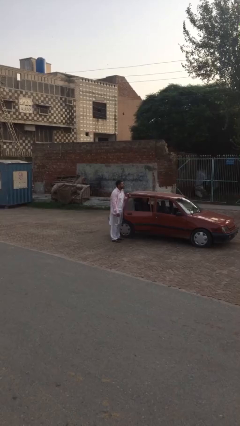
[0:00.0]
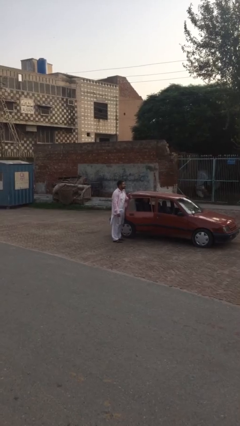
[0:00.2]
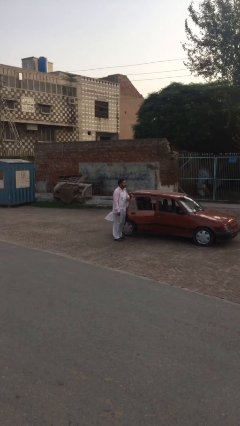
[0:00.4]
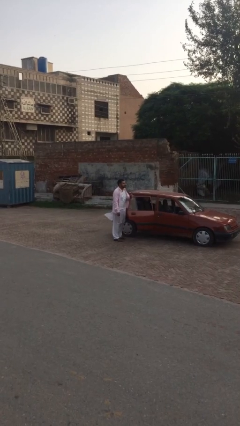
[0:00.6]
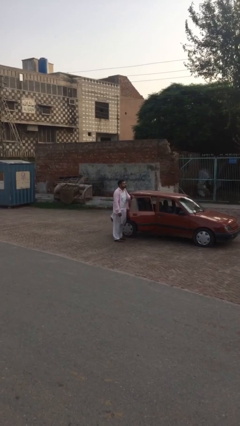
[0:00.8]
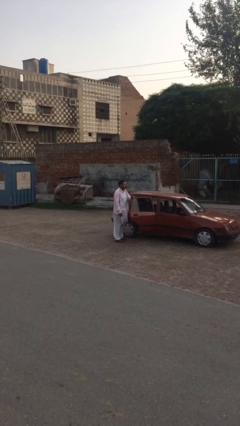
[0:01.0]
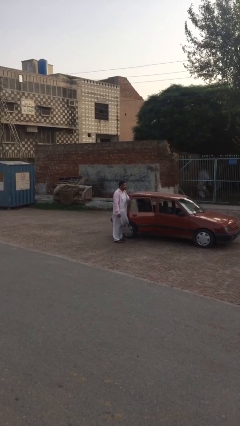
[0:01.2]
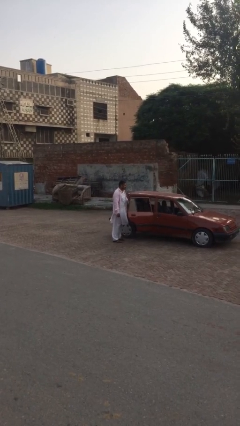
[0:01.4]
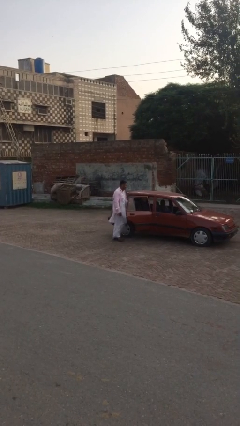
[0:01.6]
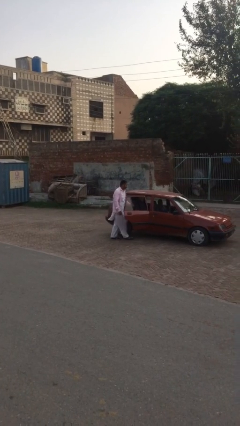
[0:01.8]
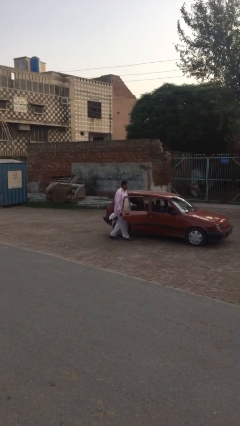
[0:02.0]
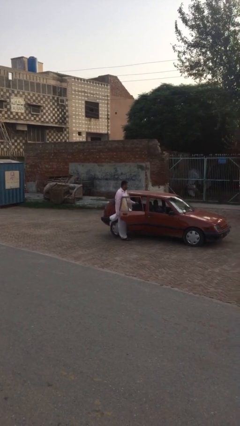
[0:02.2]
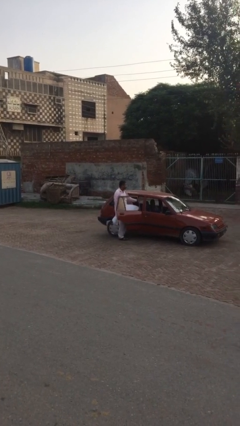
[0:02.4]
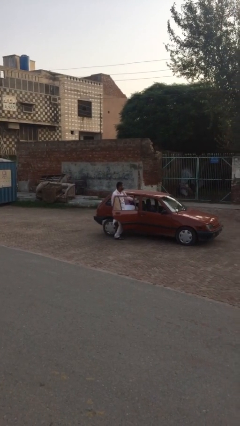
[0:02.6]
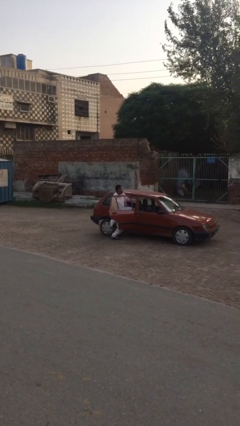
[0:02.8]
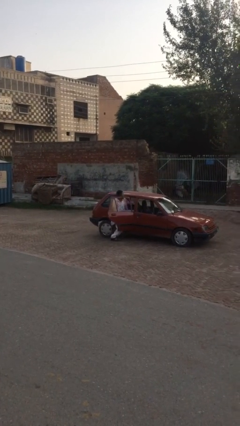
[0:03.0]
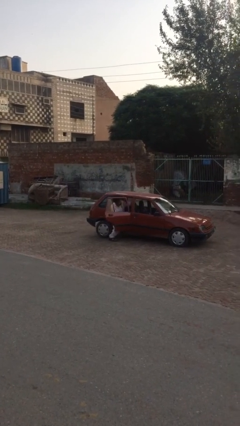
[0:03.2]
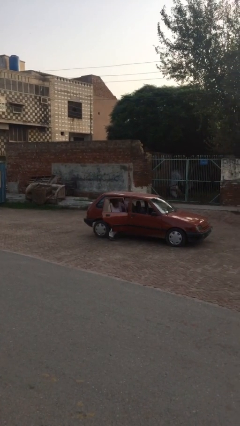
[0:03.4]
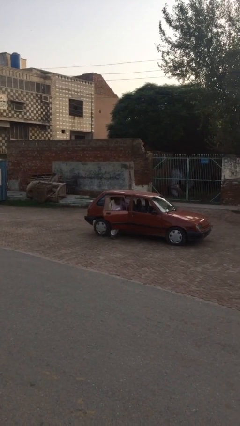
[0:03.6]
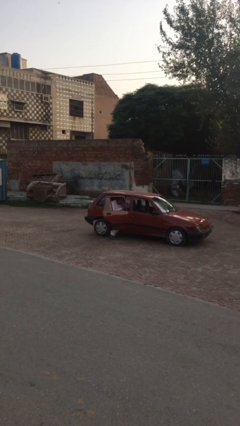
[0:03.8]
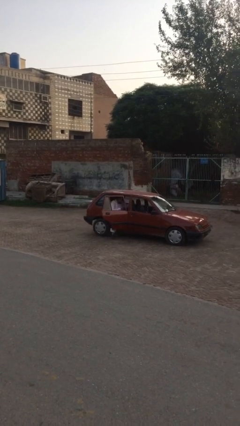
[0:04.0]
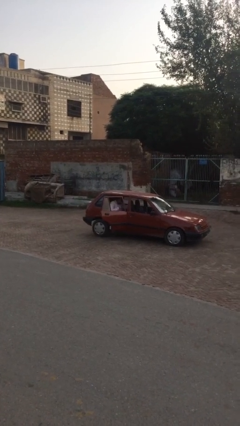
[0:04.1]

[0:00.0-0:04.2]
person enters car

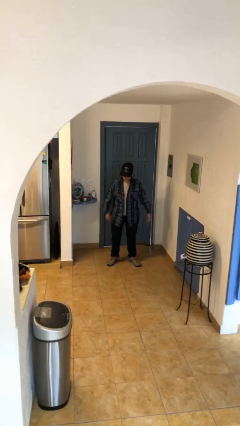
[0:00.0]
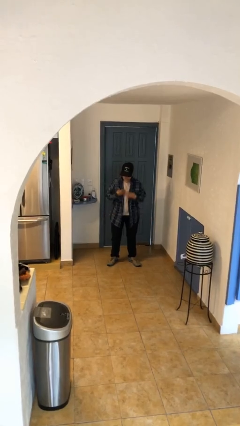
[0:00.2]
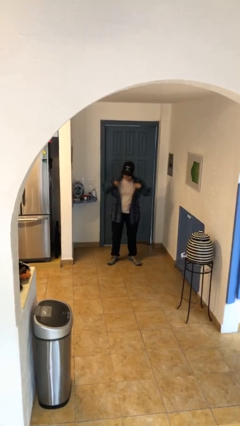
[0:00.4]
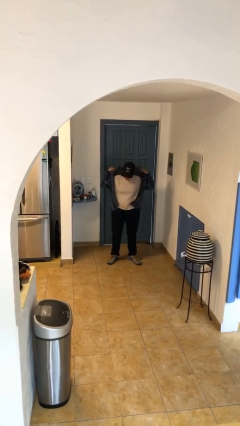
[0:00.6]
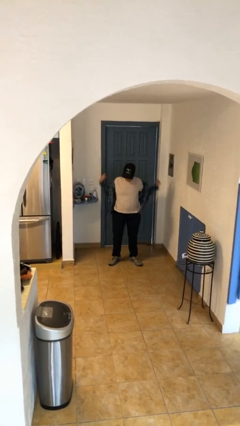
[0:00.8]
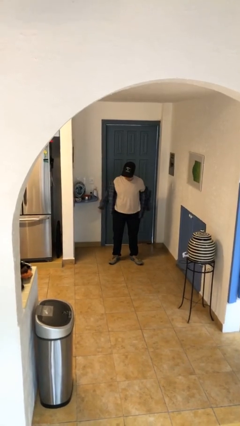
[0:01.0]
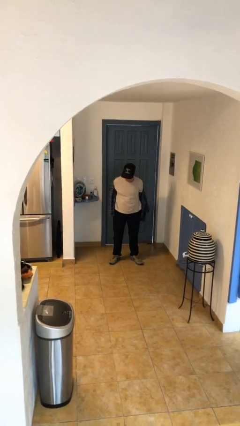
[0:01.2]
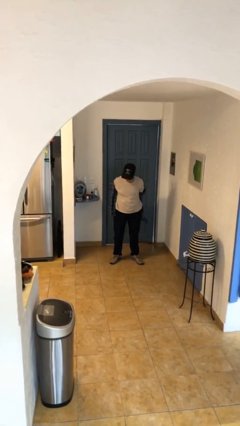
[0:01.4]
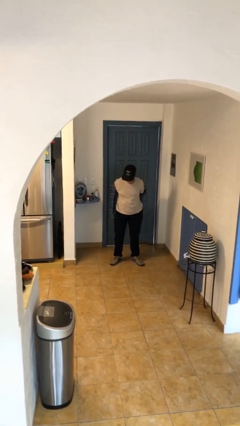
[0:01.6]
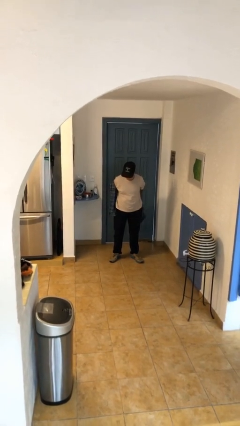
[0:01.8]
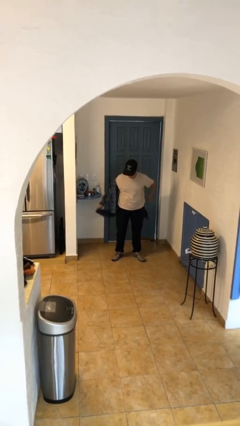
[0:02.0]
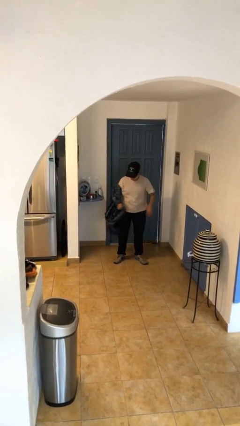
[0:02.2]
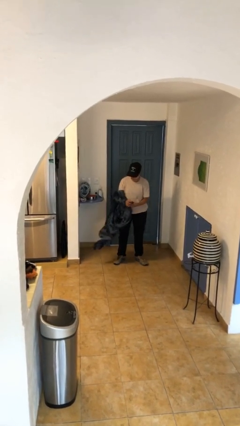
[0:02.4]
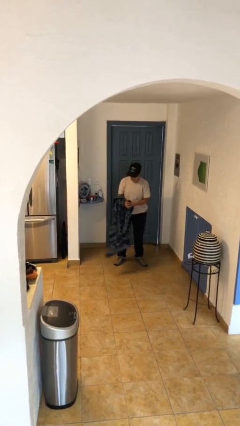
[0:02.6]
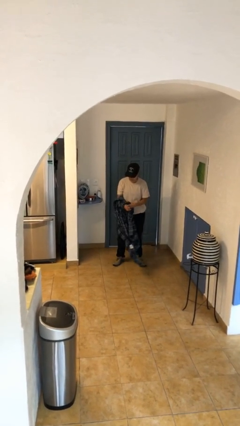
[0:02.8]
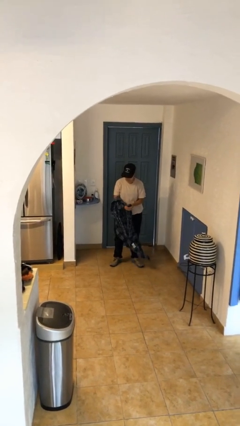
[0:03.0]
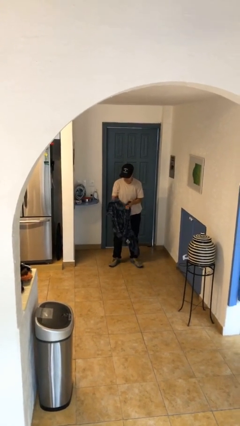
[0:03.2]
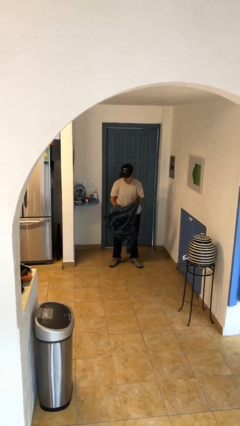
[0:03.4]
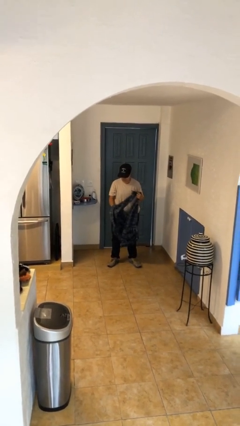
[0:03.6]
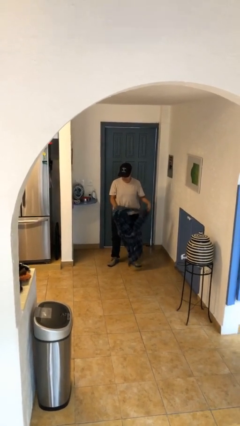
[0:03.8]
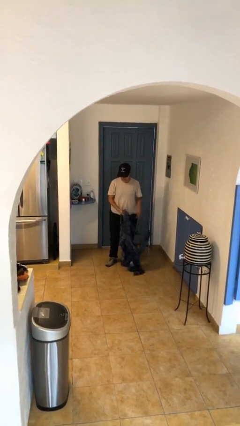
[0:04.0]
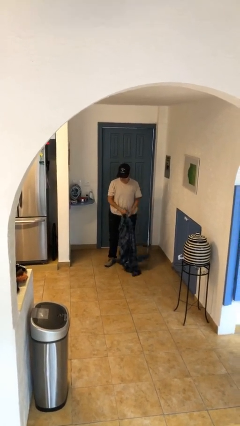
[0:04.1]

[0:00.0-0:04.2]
person takes off shirt

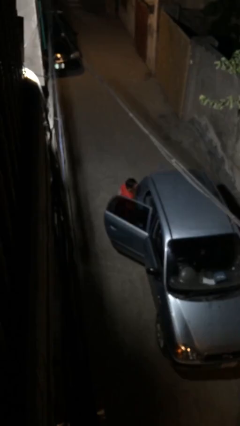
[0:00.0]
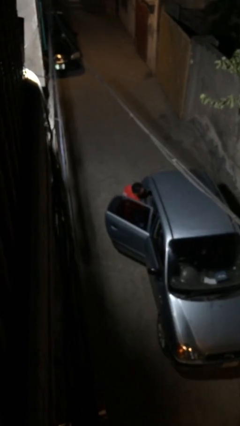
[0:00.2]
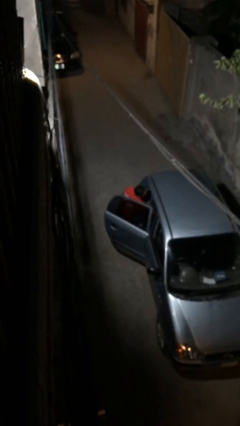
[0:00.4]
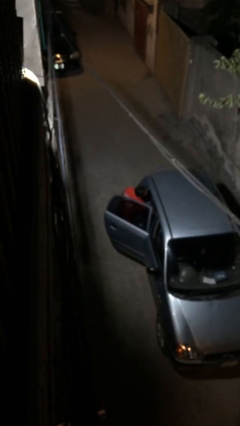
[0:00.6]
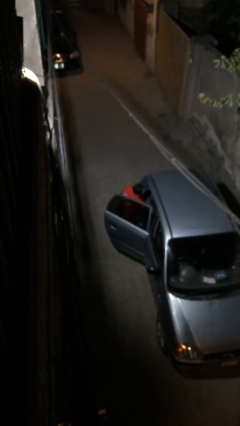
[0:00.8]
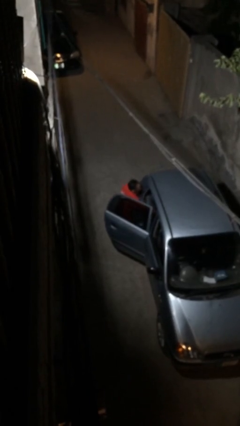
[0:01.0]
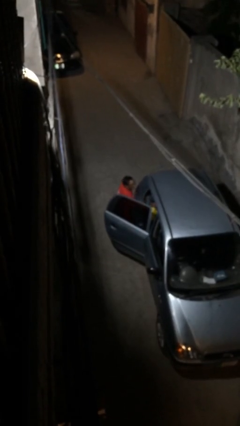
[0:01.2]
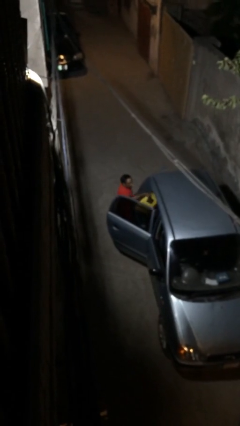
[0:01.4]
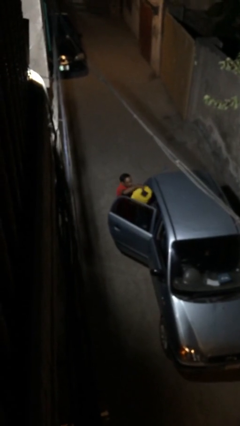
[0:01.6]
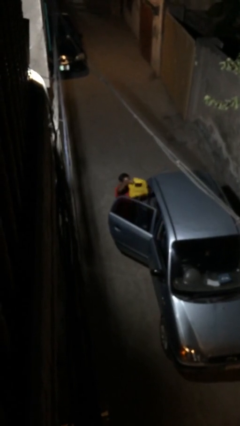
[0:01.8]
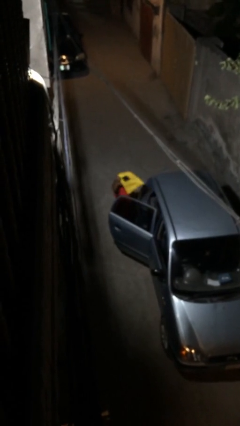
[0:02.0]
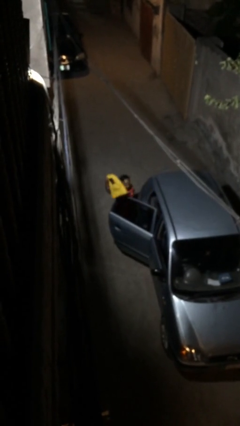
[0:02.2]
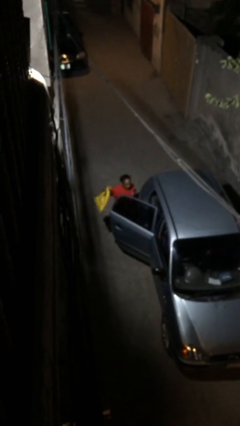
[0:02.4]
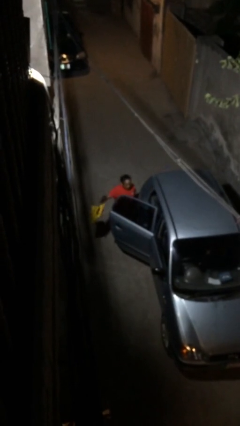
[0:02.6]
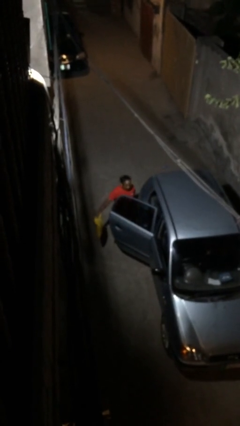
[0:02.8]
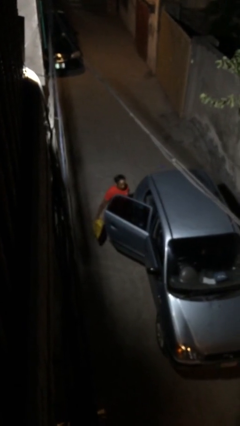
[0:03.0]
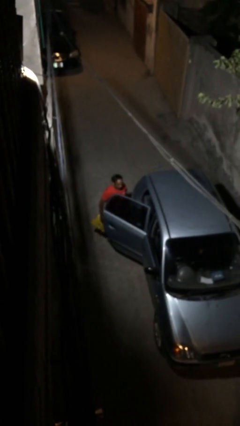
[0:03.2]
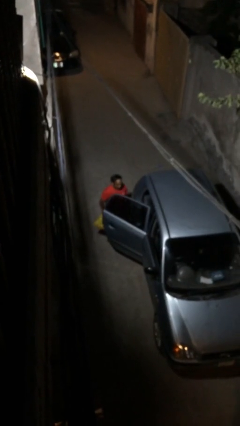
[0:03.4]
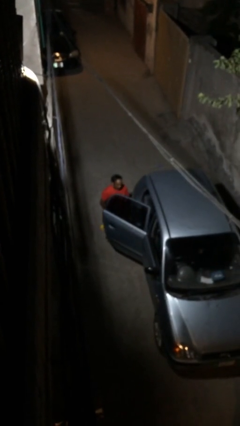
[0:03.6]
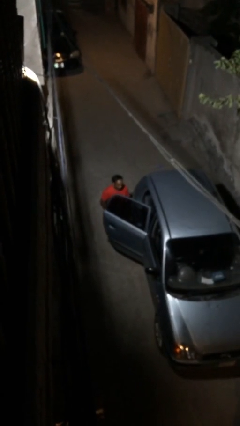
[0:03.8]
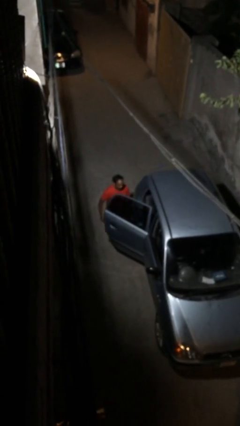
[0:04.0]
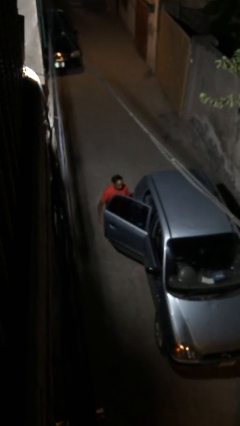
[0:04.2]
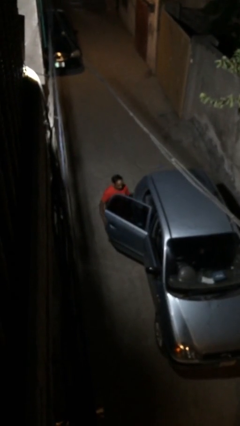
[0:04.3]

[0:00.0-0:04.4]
person unloads car

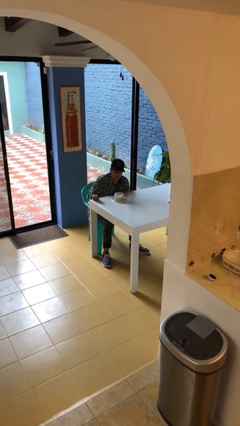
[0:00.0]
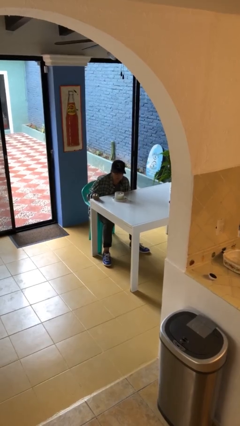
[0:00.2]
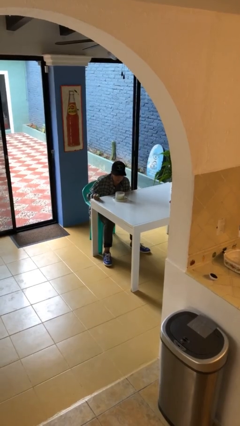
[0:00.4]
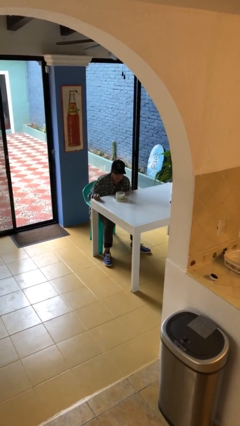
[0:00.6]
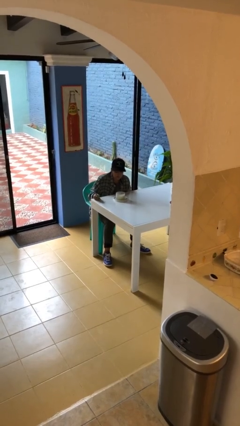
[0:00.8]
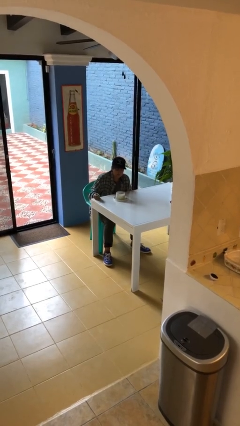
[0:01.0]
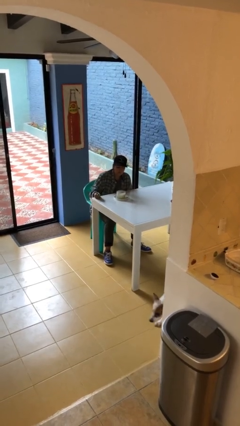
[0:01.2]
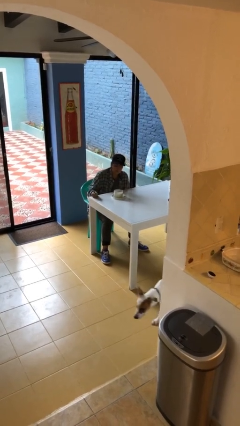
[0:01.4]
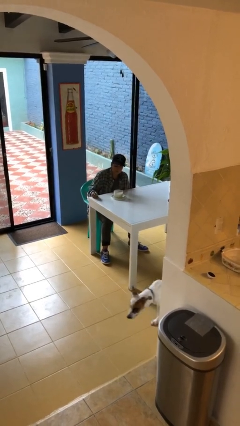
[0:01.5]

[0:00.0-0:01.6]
person extinguishes candle

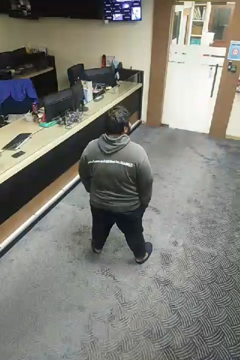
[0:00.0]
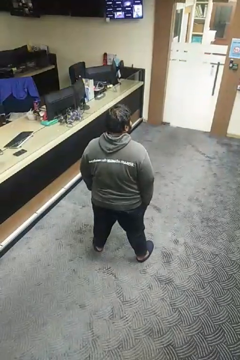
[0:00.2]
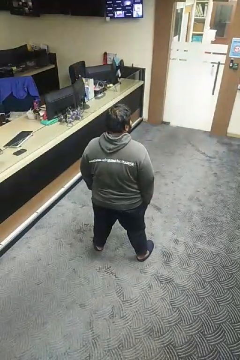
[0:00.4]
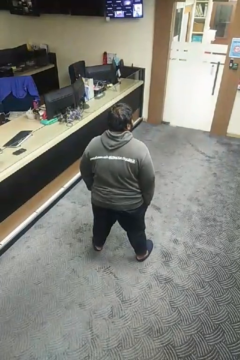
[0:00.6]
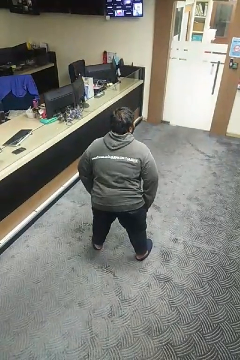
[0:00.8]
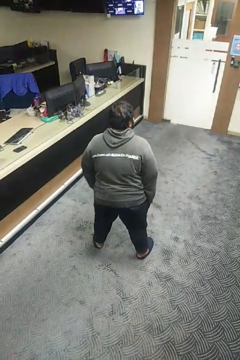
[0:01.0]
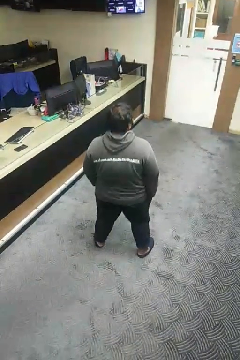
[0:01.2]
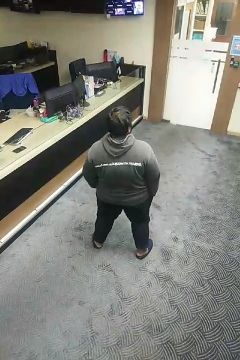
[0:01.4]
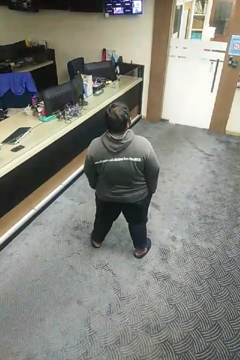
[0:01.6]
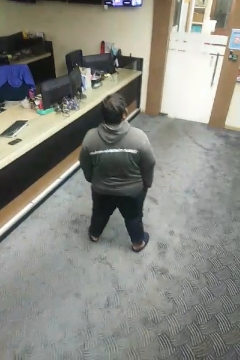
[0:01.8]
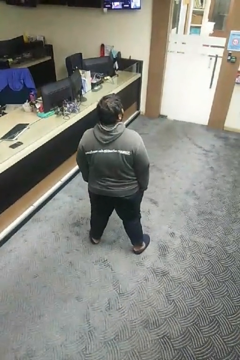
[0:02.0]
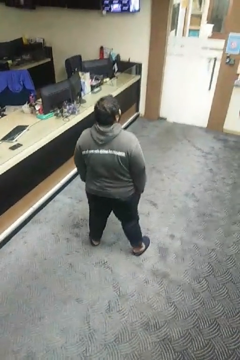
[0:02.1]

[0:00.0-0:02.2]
person wiggles hips

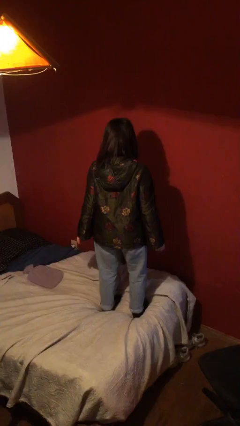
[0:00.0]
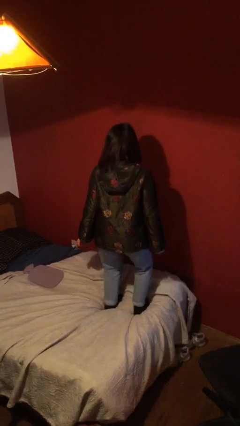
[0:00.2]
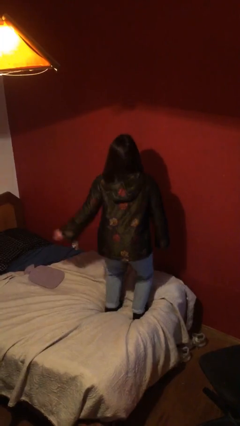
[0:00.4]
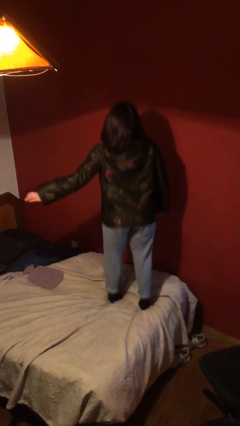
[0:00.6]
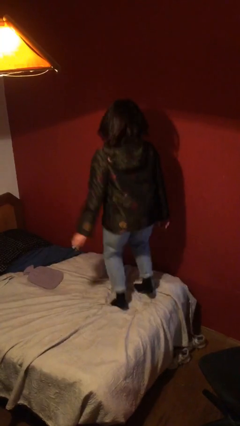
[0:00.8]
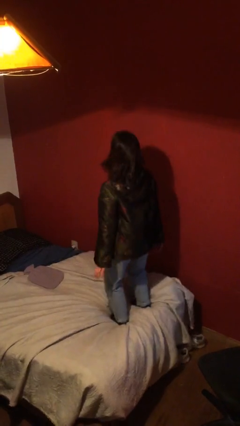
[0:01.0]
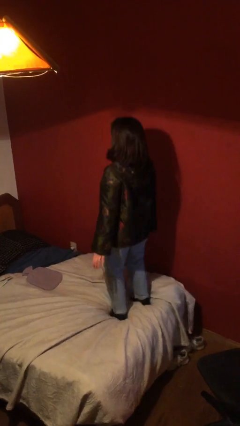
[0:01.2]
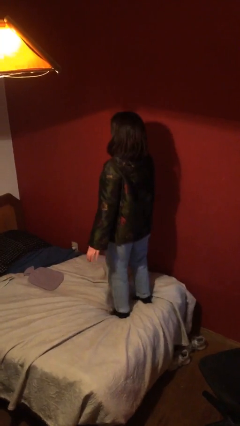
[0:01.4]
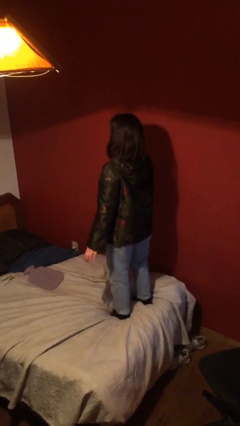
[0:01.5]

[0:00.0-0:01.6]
person jumps on bed
